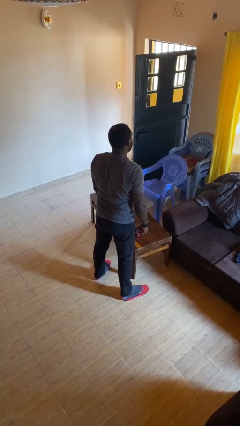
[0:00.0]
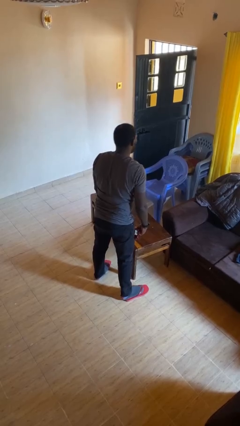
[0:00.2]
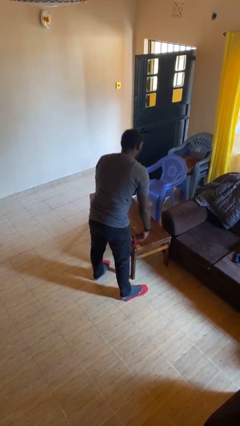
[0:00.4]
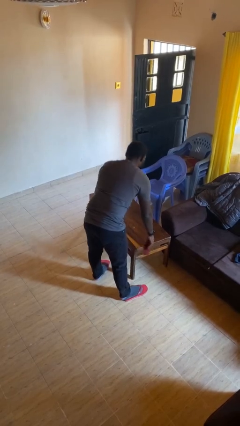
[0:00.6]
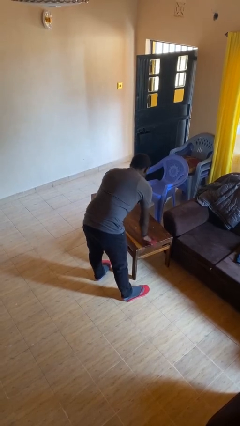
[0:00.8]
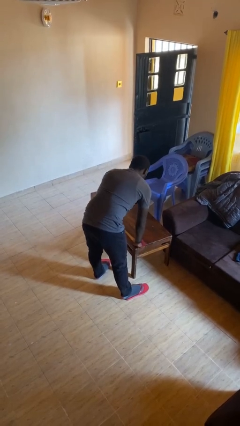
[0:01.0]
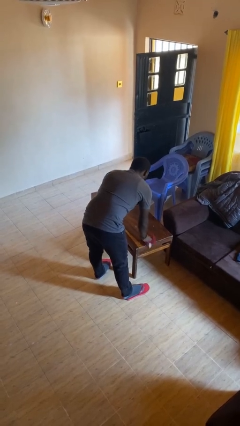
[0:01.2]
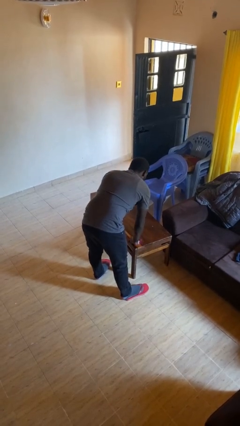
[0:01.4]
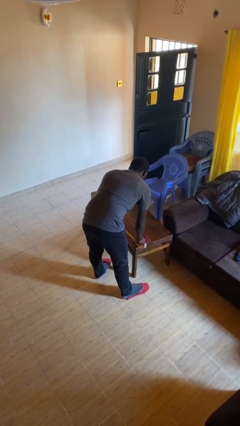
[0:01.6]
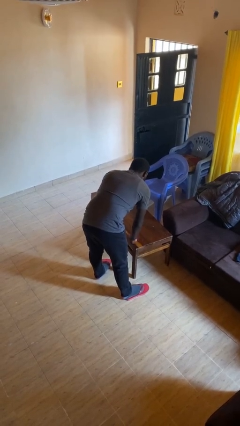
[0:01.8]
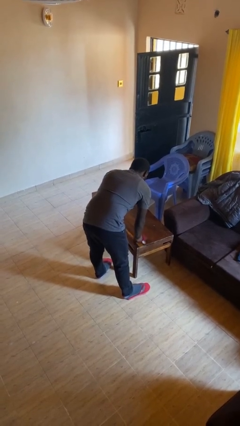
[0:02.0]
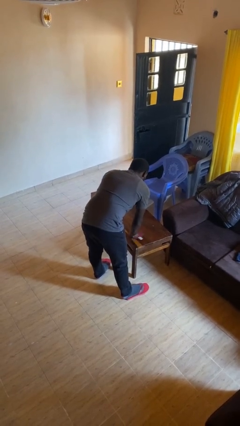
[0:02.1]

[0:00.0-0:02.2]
person cleans table with rag

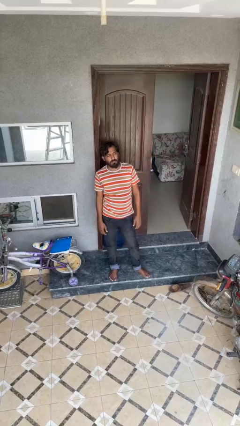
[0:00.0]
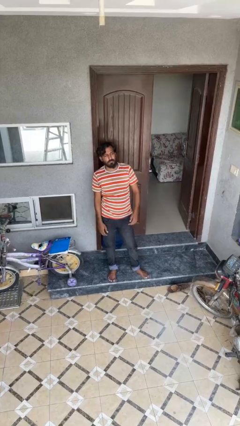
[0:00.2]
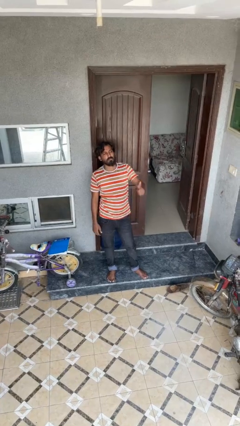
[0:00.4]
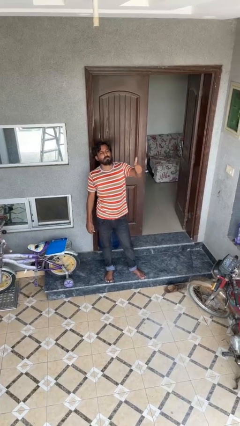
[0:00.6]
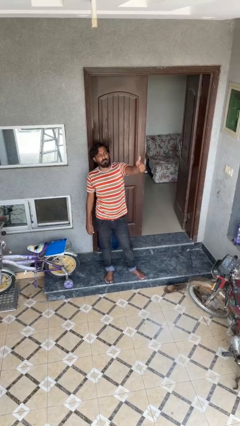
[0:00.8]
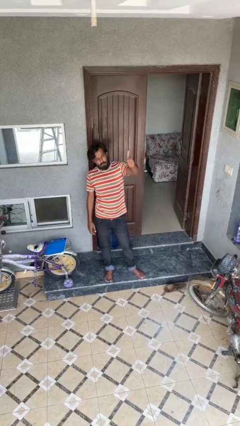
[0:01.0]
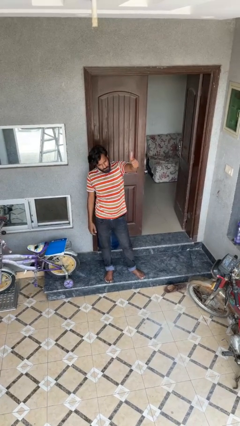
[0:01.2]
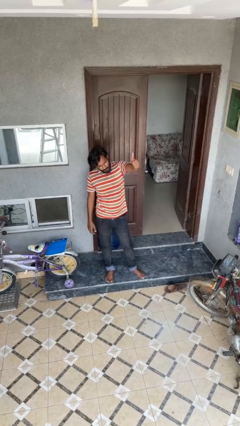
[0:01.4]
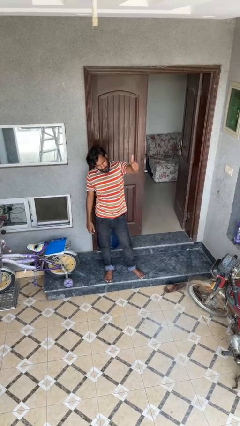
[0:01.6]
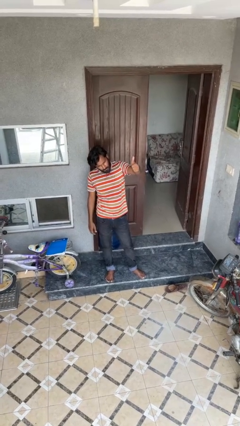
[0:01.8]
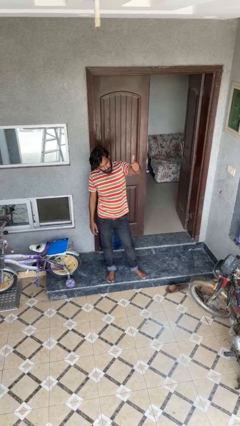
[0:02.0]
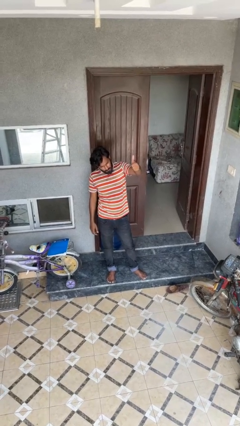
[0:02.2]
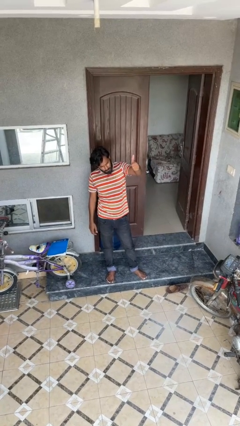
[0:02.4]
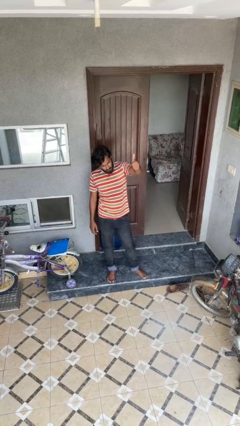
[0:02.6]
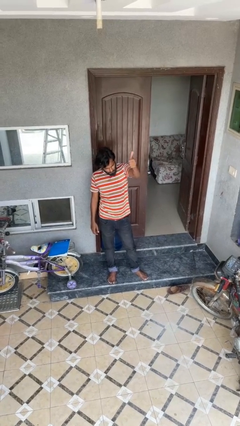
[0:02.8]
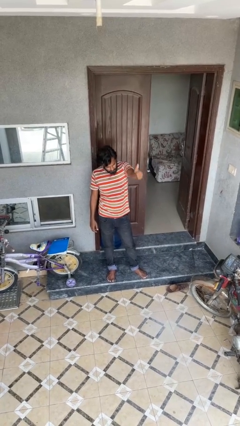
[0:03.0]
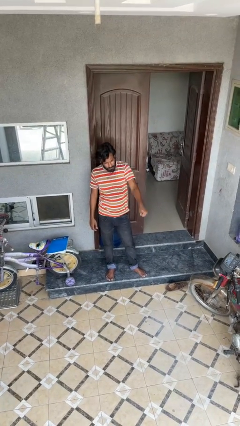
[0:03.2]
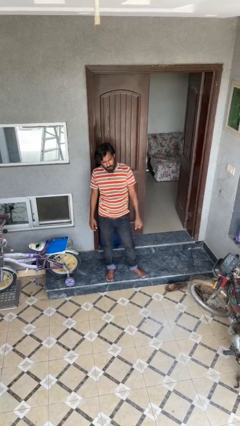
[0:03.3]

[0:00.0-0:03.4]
person gestures thumbs up

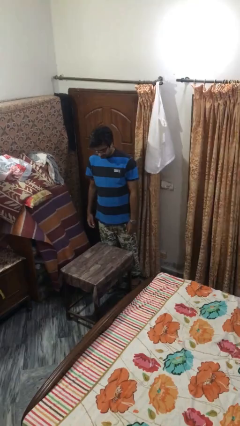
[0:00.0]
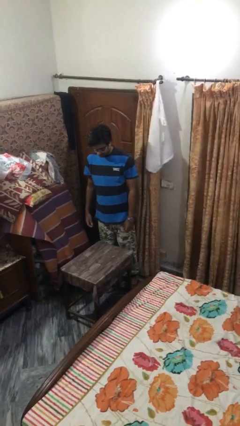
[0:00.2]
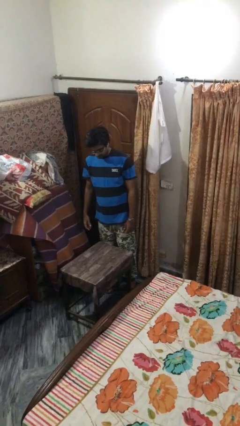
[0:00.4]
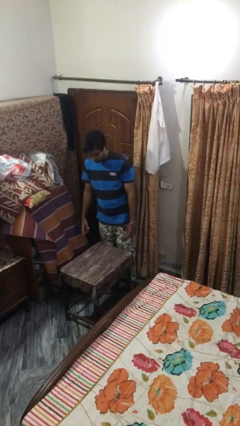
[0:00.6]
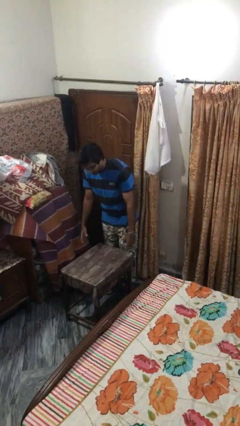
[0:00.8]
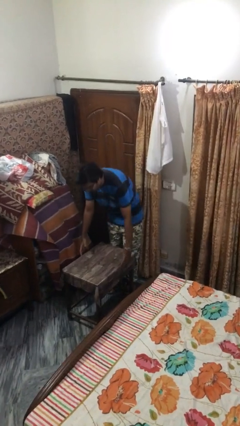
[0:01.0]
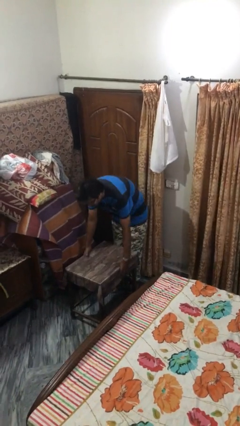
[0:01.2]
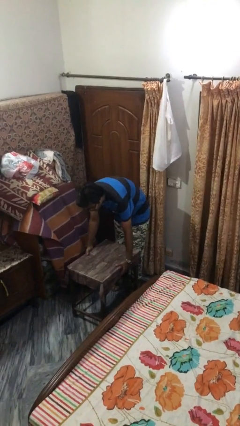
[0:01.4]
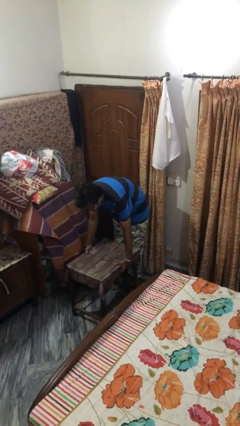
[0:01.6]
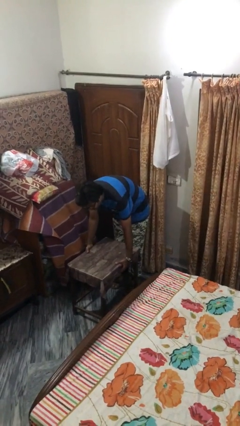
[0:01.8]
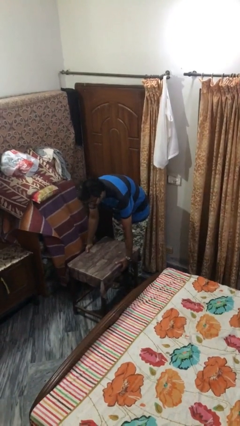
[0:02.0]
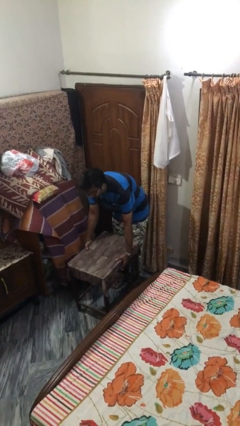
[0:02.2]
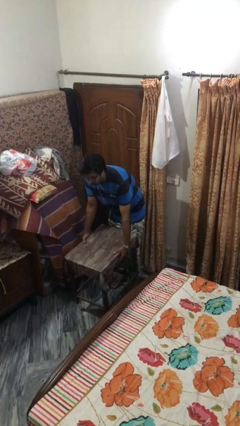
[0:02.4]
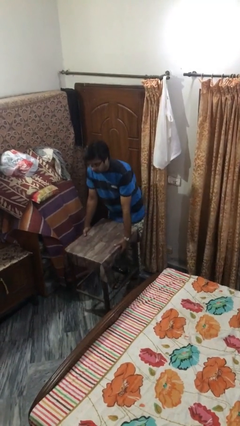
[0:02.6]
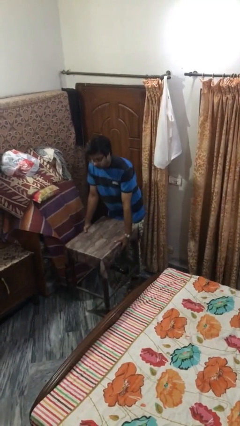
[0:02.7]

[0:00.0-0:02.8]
person picks up object from floor

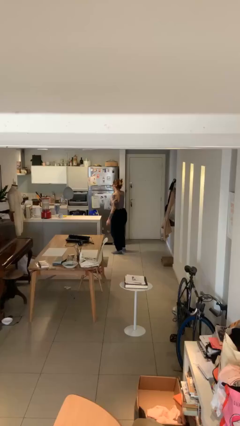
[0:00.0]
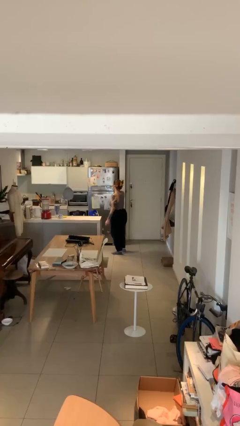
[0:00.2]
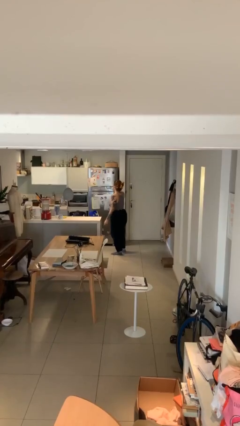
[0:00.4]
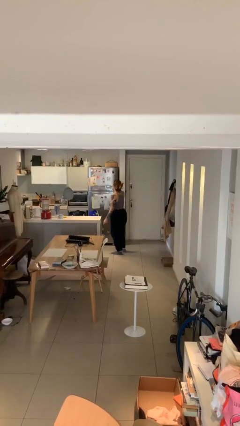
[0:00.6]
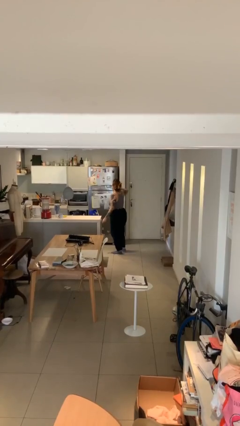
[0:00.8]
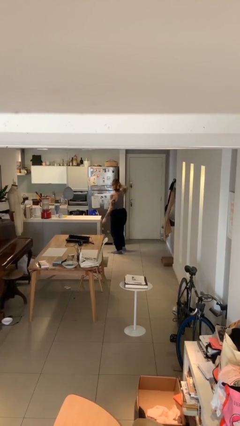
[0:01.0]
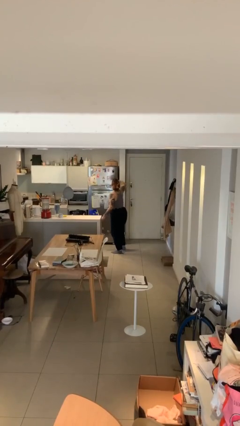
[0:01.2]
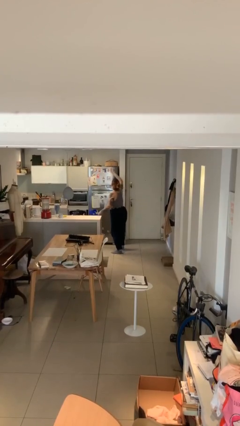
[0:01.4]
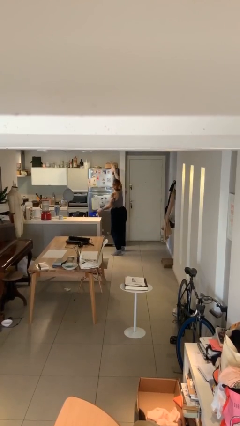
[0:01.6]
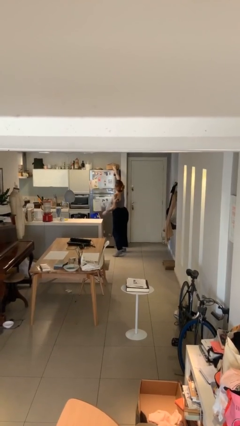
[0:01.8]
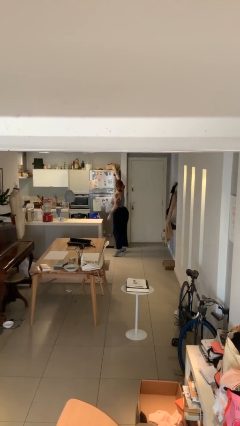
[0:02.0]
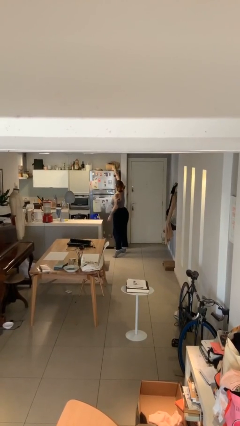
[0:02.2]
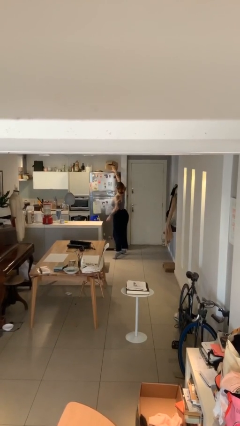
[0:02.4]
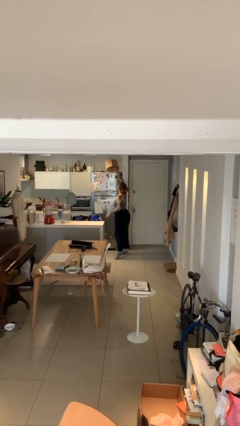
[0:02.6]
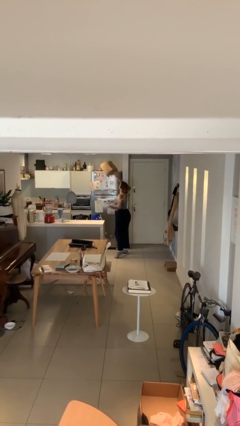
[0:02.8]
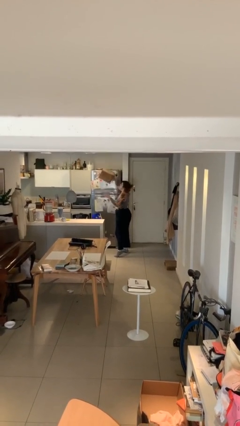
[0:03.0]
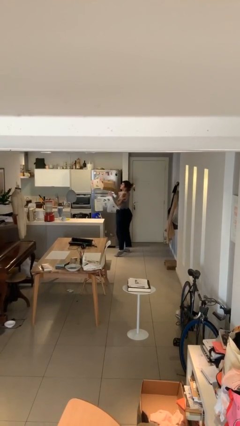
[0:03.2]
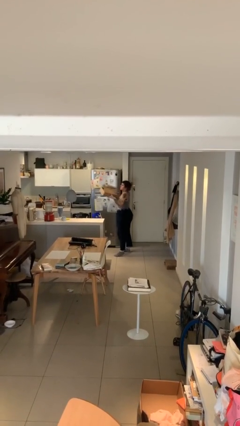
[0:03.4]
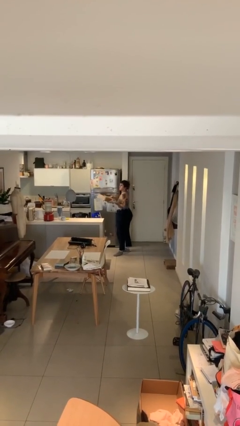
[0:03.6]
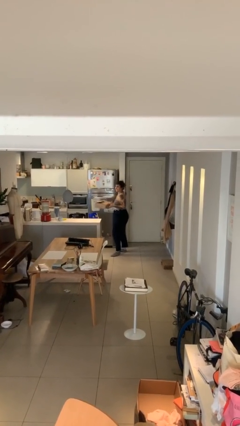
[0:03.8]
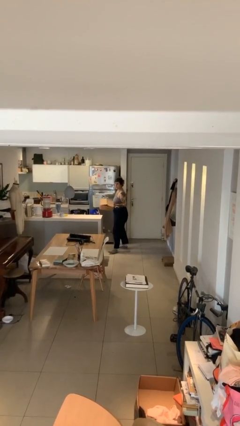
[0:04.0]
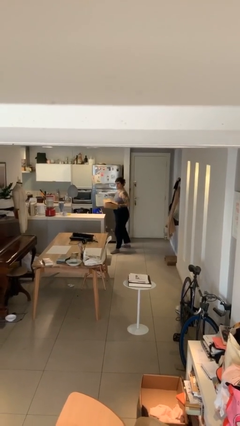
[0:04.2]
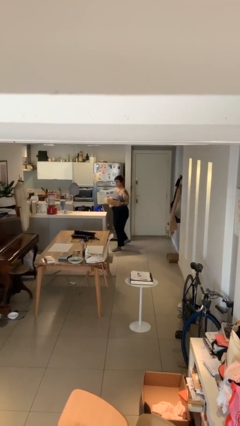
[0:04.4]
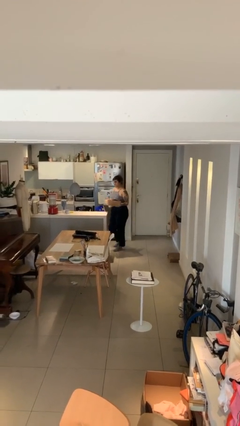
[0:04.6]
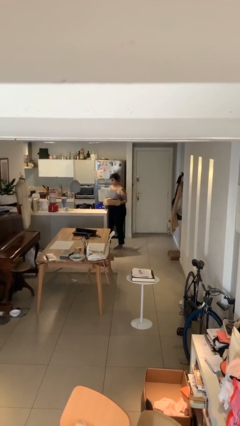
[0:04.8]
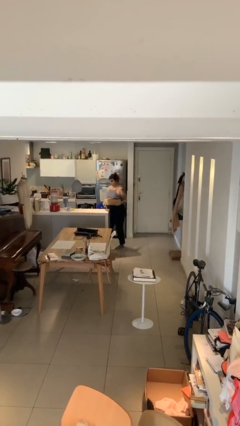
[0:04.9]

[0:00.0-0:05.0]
person picks up object from shelf

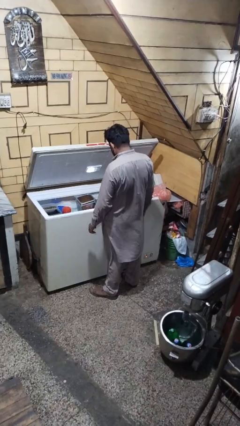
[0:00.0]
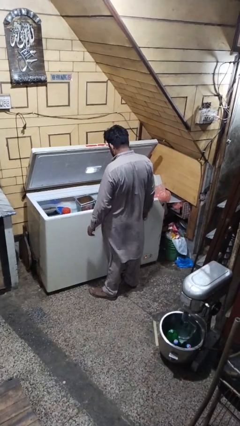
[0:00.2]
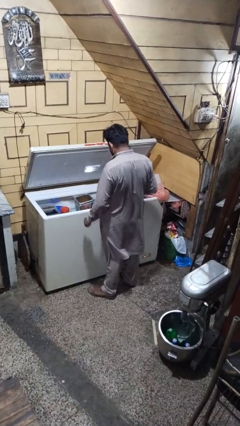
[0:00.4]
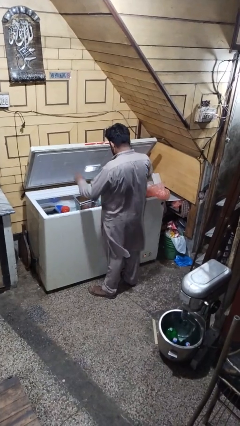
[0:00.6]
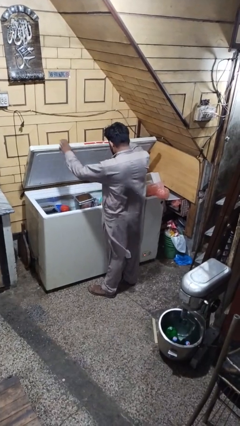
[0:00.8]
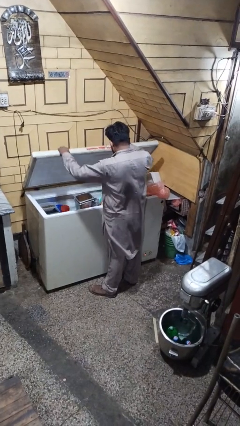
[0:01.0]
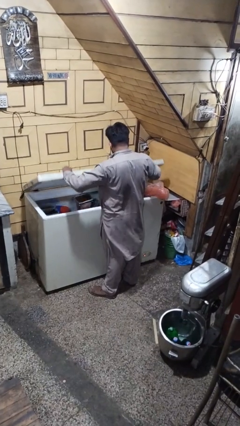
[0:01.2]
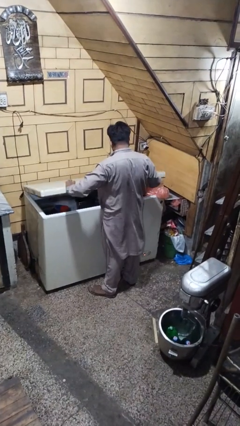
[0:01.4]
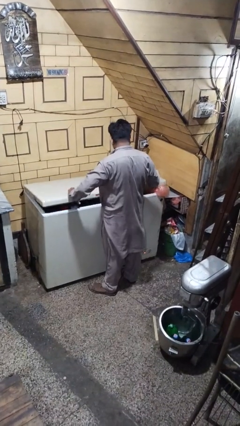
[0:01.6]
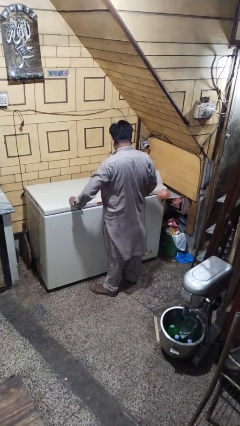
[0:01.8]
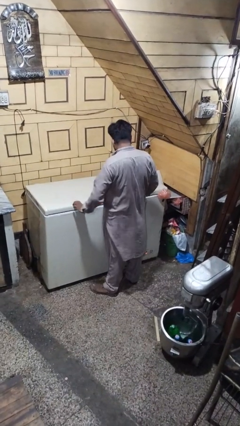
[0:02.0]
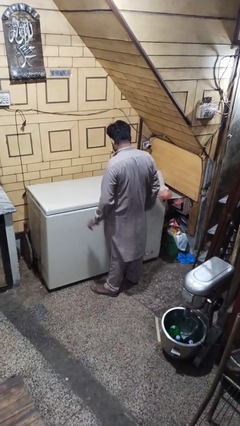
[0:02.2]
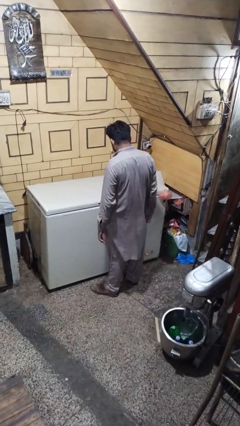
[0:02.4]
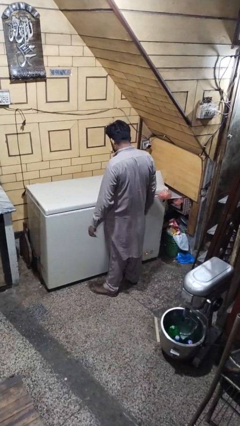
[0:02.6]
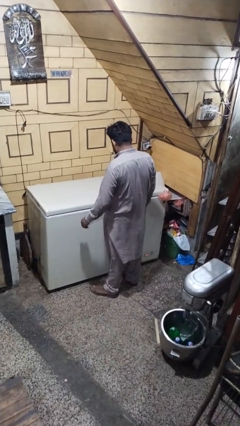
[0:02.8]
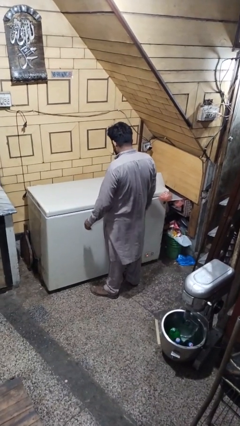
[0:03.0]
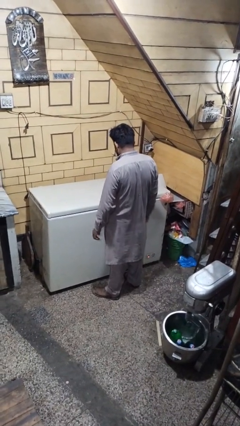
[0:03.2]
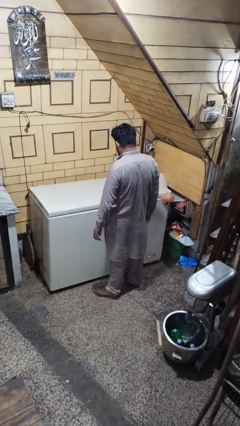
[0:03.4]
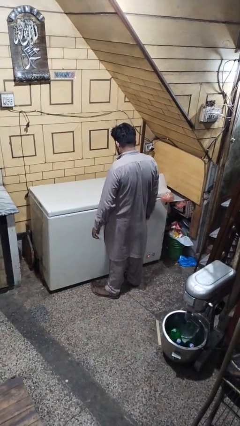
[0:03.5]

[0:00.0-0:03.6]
person closes refrigerator

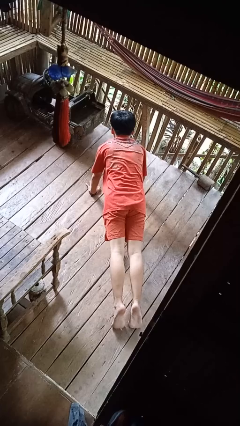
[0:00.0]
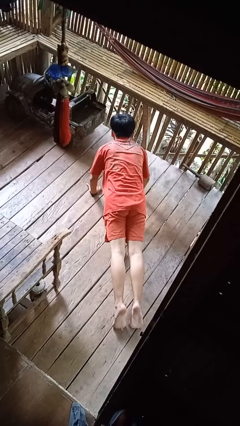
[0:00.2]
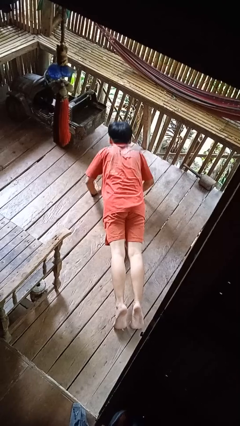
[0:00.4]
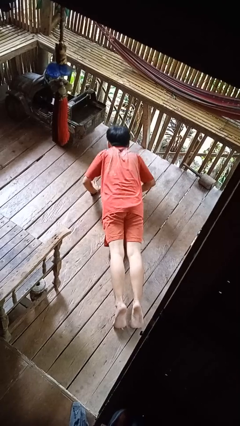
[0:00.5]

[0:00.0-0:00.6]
person exercises with pushup
